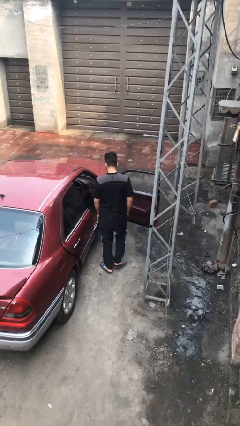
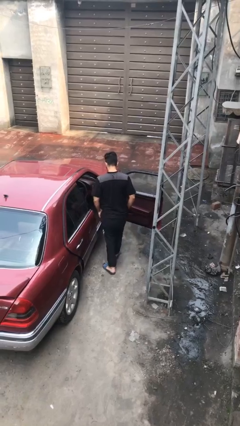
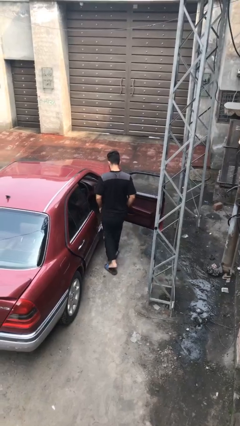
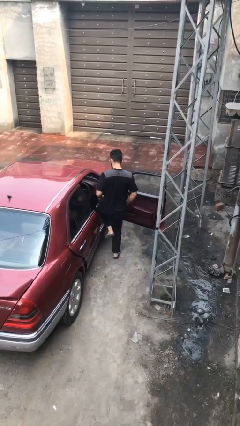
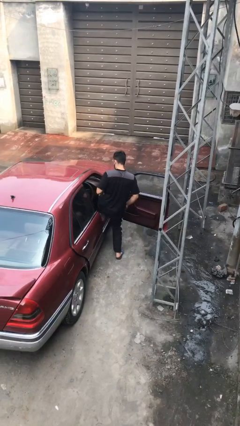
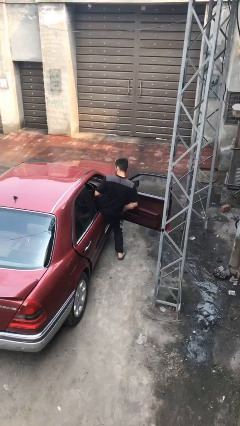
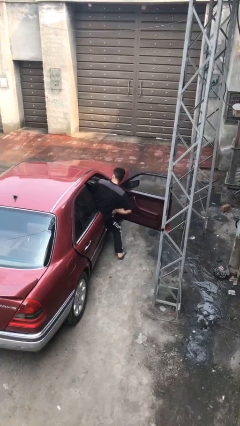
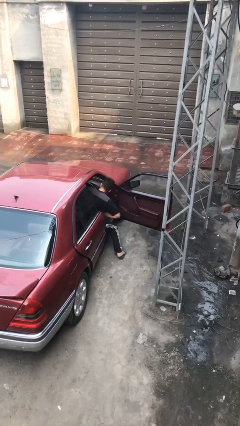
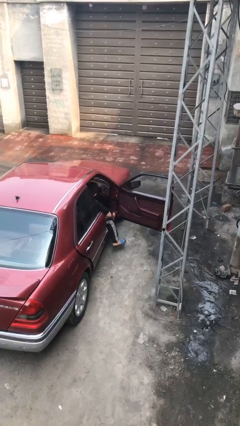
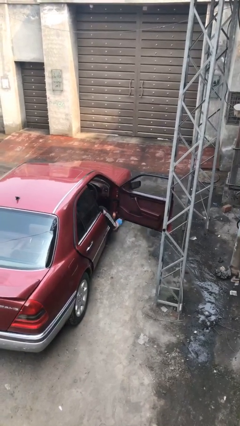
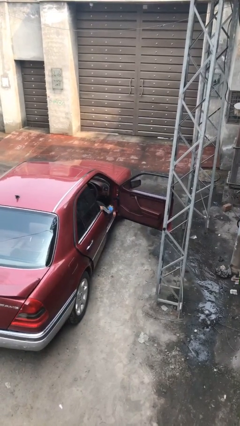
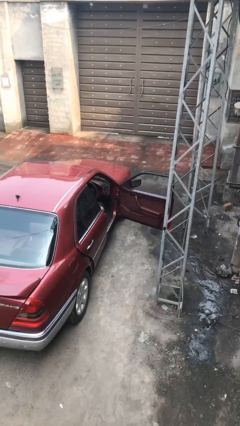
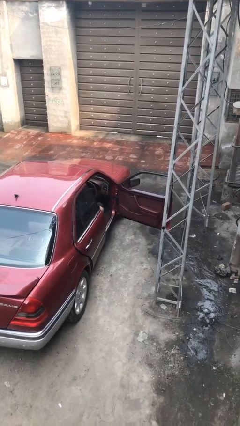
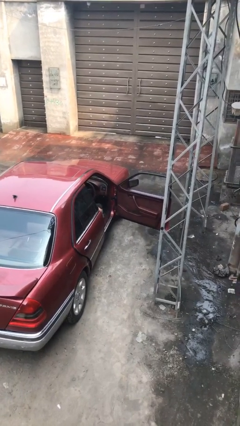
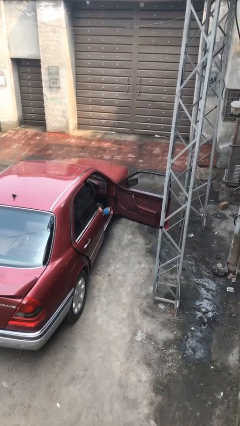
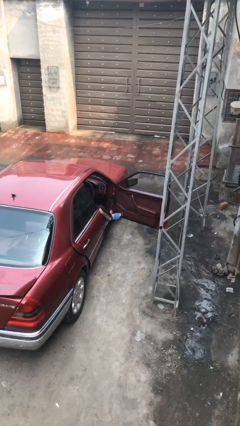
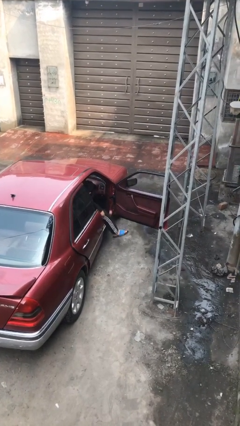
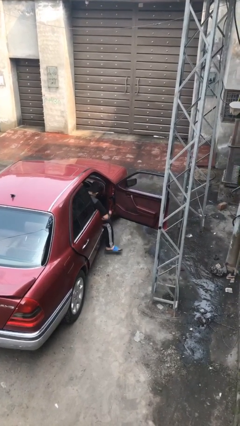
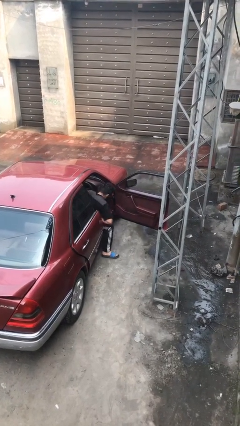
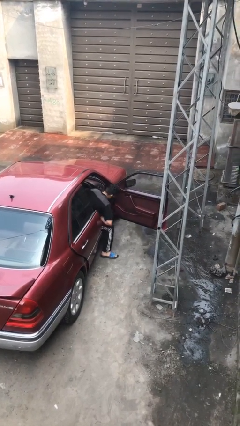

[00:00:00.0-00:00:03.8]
person enters car

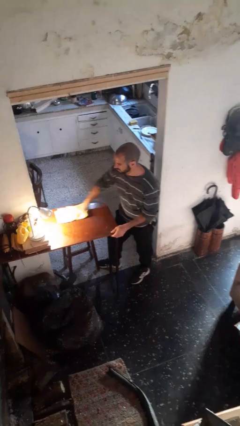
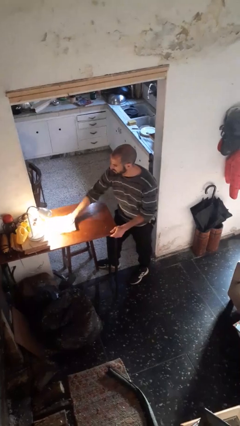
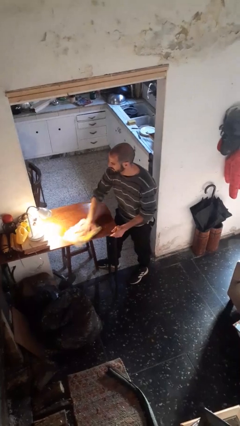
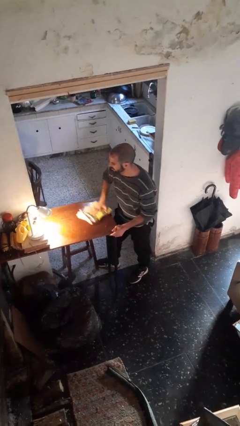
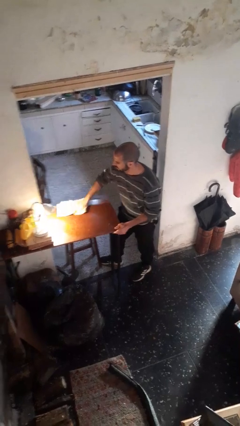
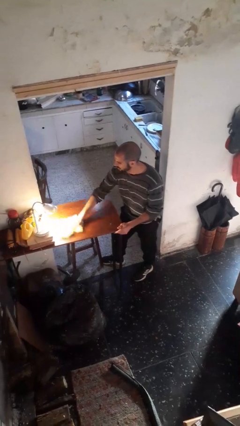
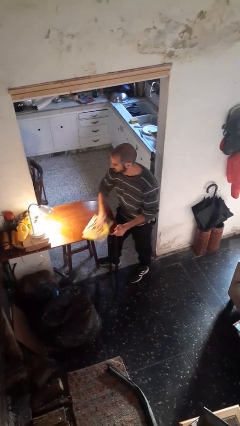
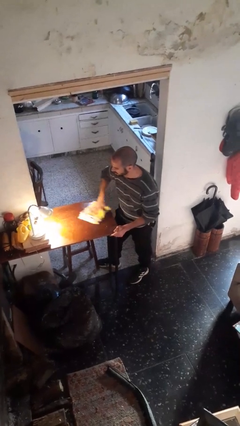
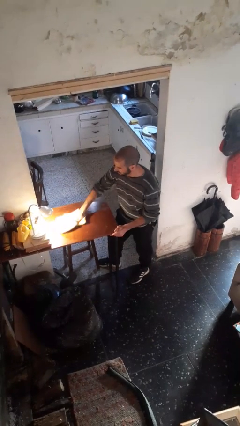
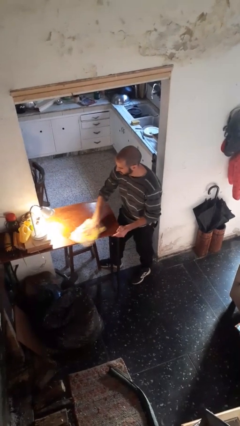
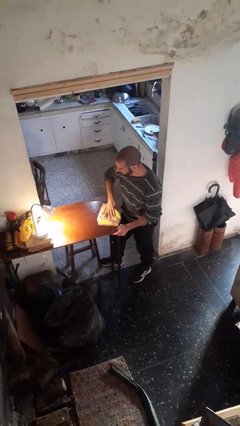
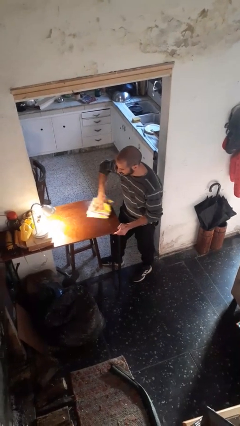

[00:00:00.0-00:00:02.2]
person cleans table with rag

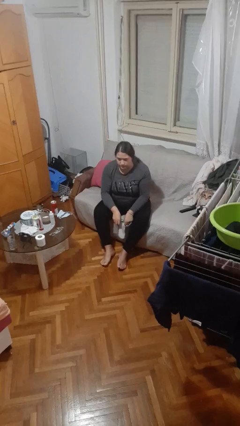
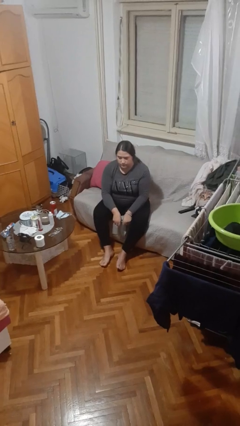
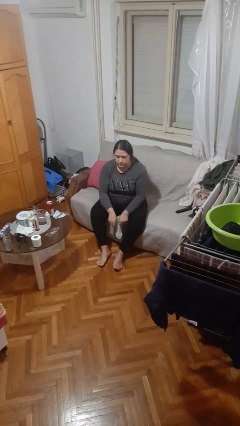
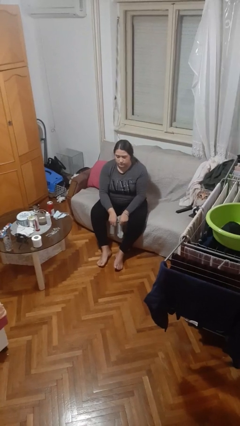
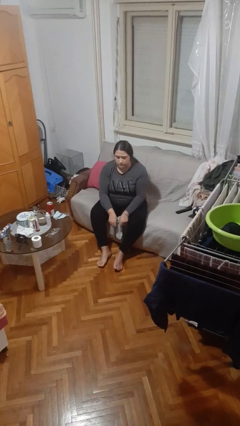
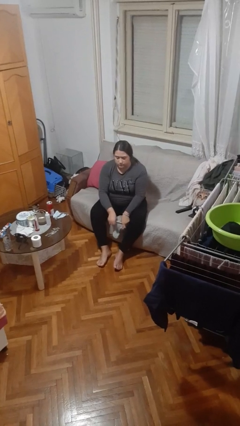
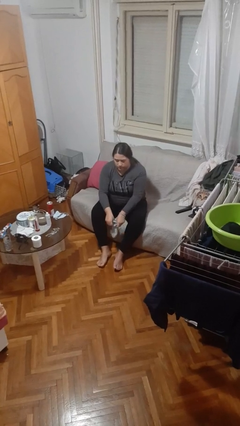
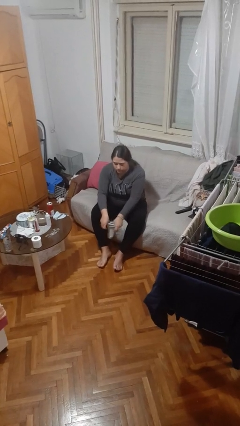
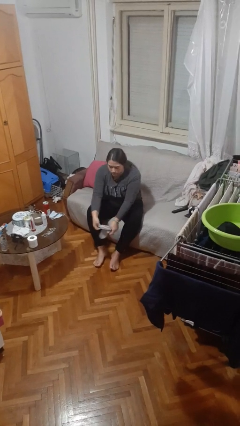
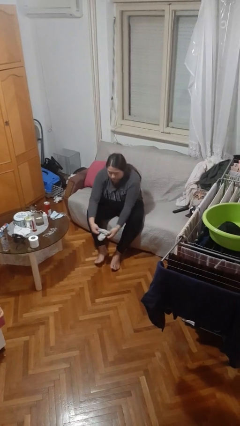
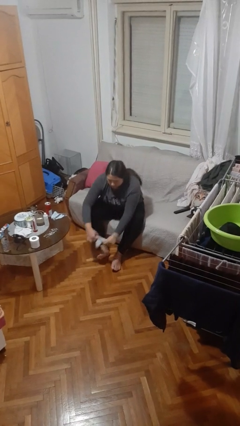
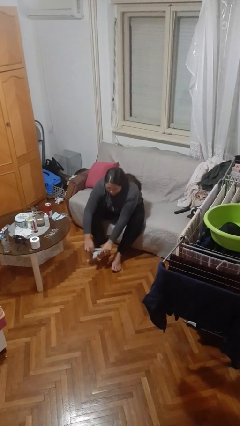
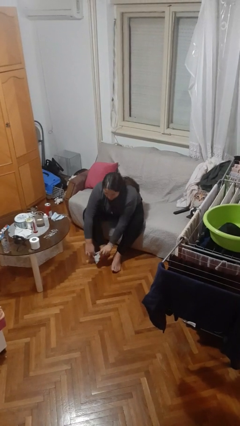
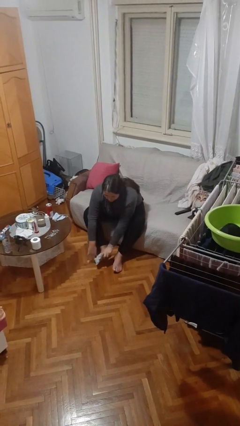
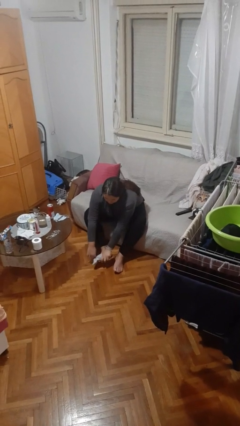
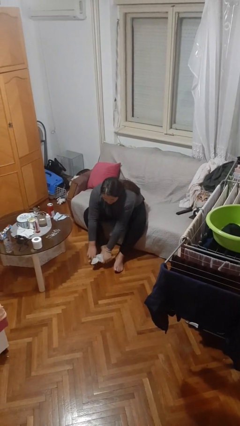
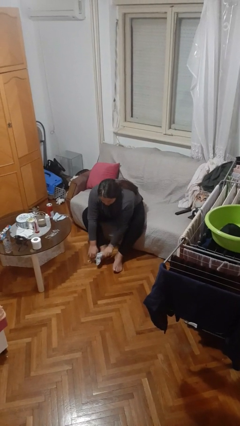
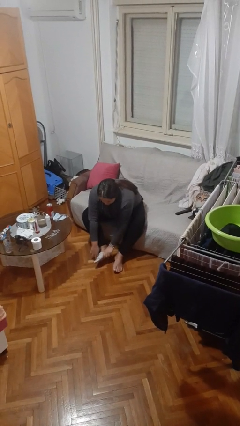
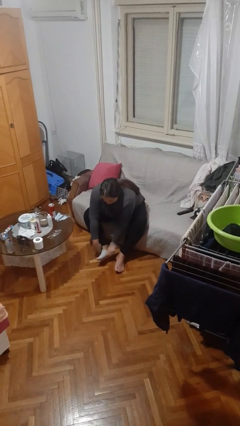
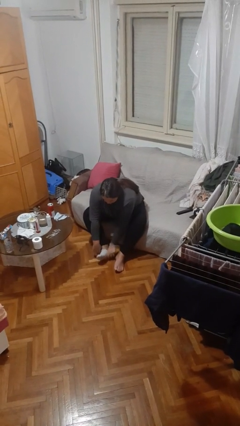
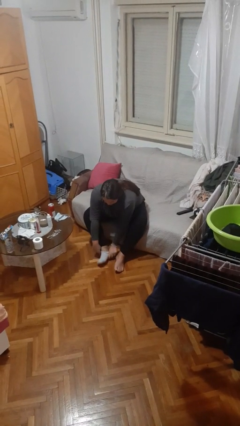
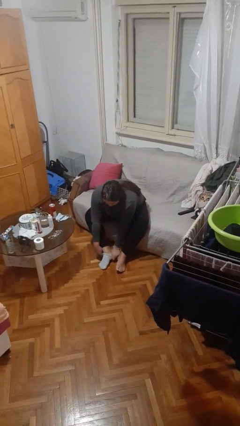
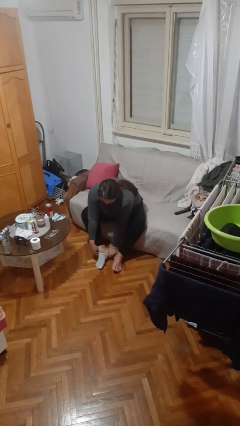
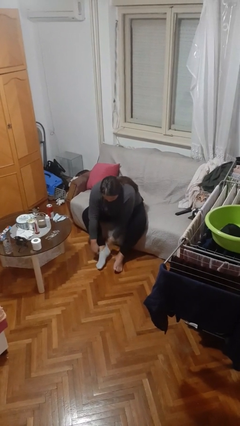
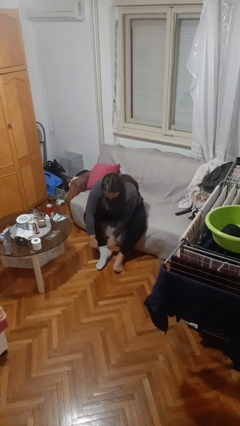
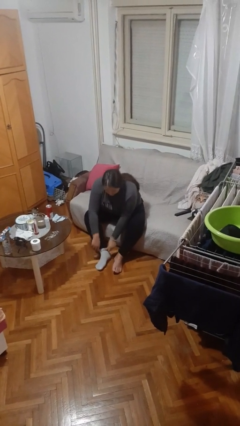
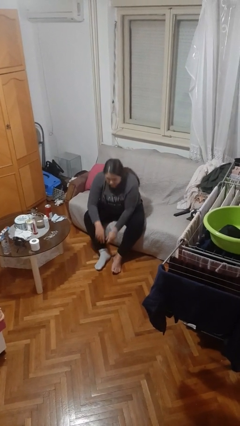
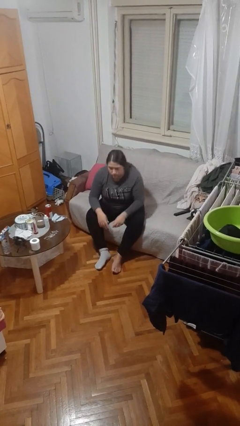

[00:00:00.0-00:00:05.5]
person puts on socks

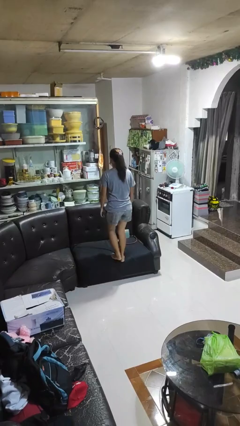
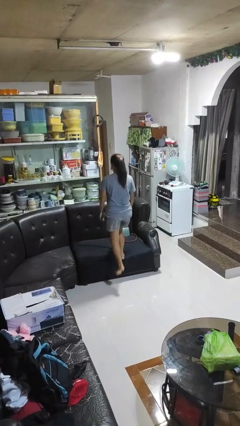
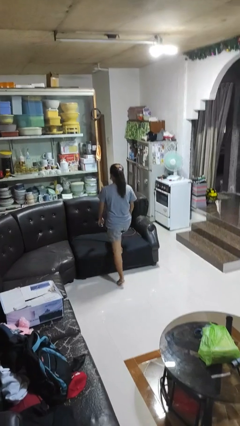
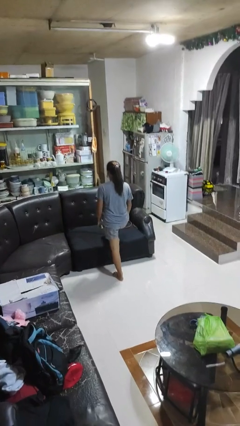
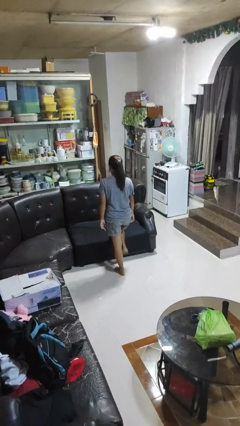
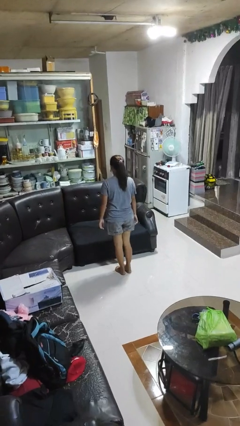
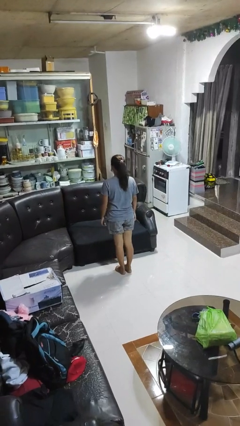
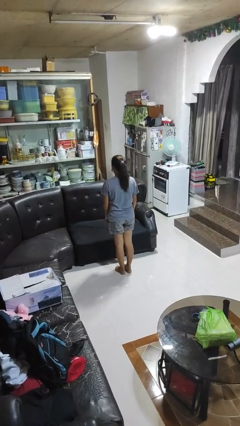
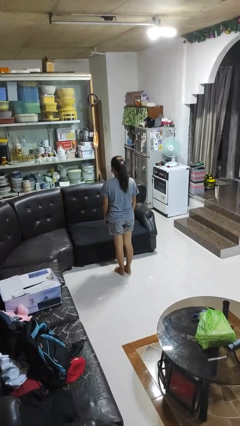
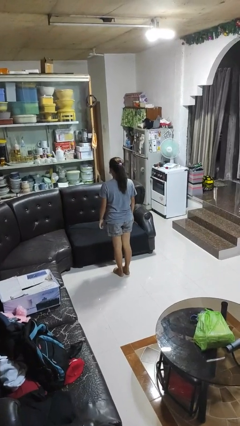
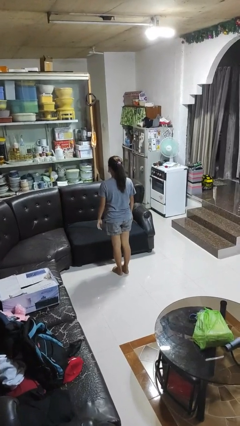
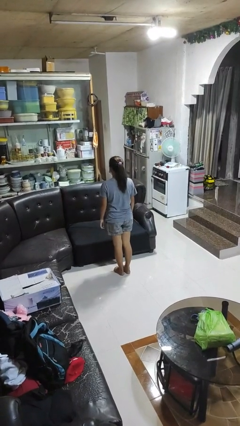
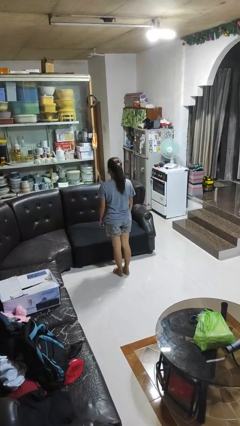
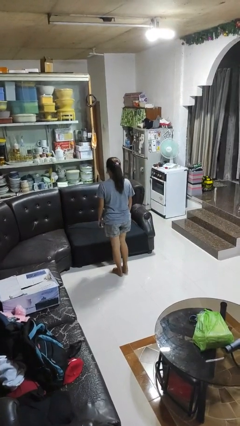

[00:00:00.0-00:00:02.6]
person climbs off couch

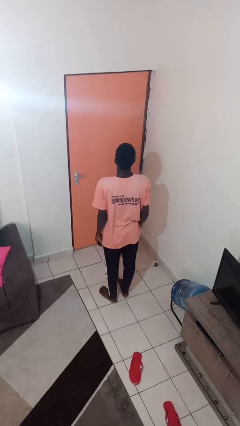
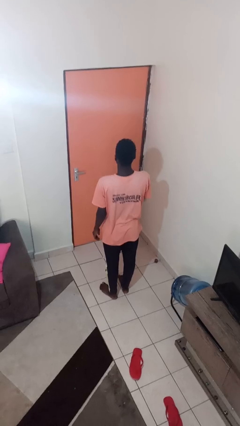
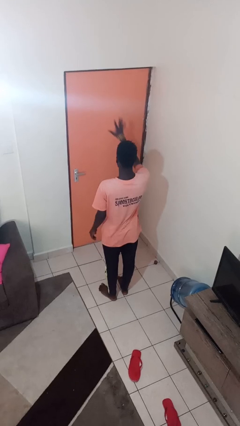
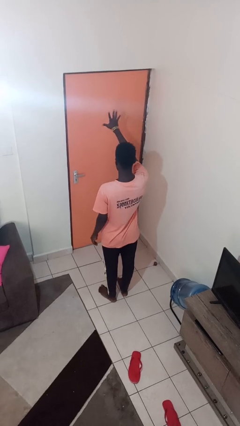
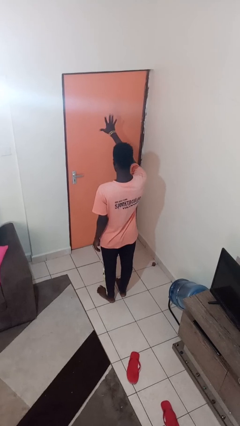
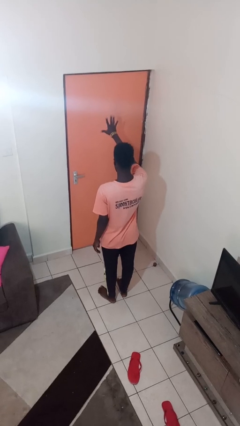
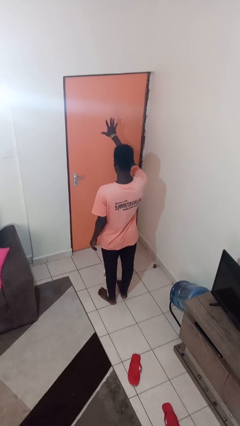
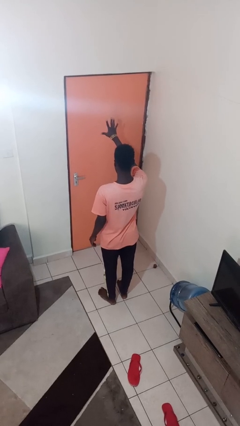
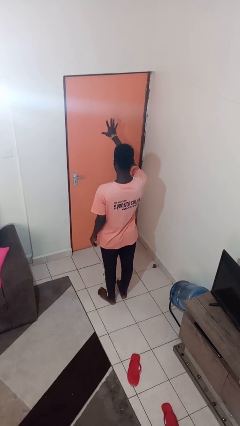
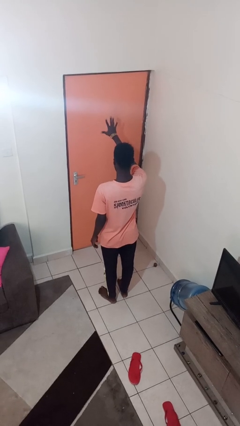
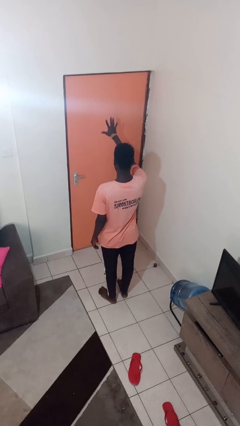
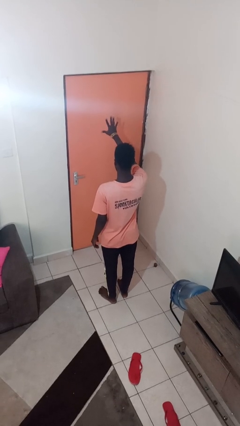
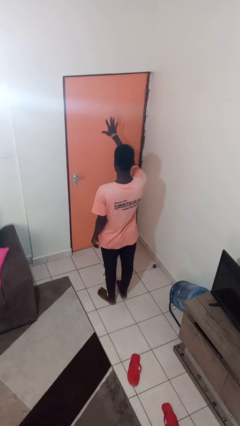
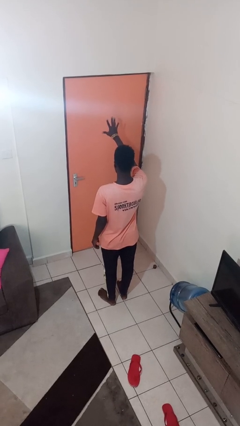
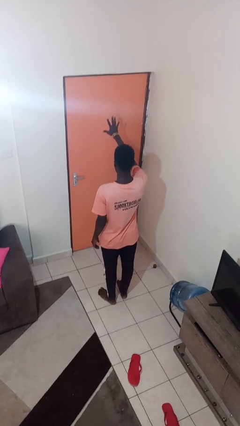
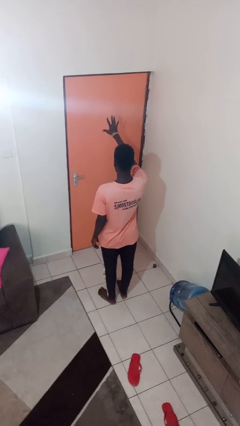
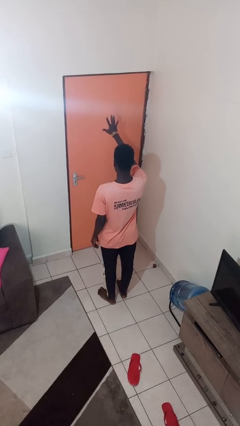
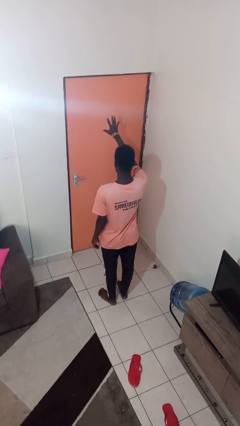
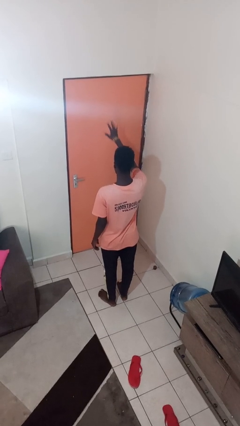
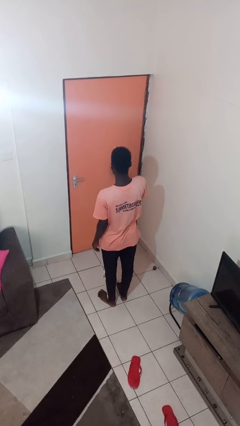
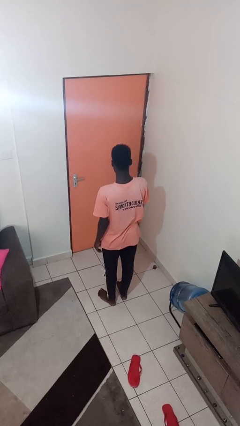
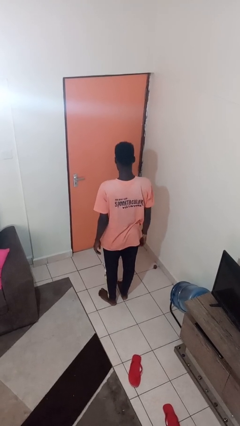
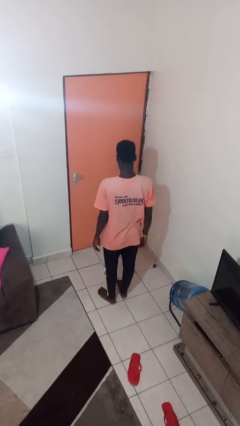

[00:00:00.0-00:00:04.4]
person gestures number five
